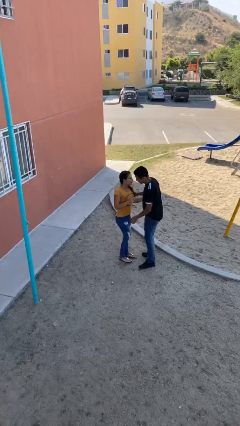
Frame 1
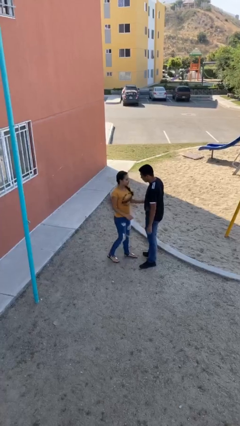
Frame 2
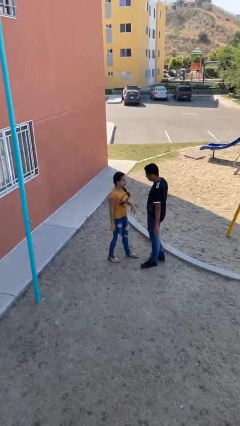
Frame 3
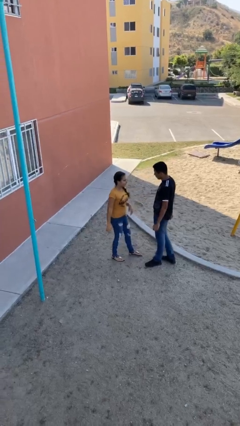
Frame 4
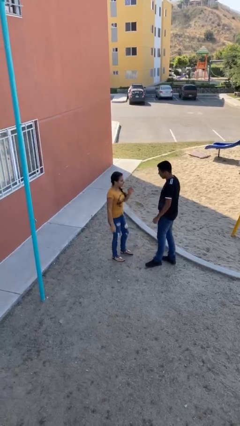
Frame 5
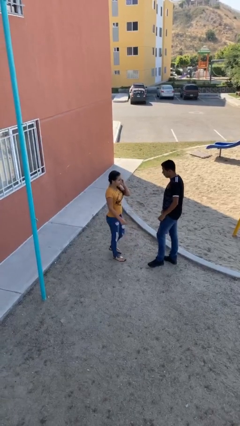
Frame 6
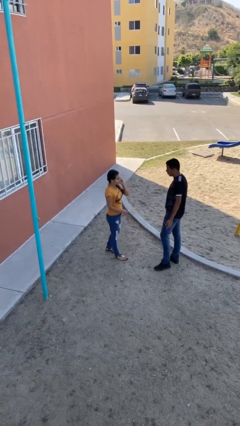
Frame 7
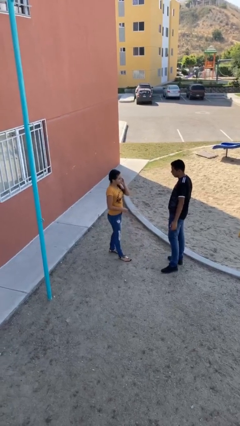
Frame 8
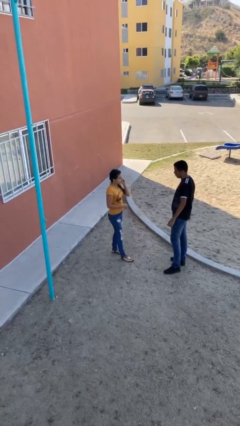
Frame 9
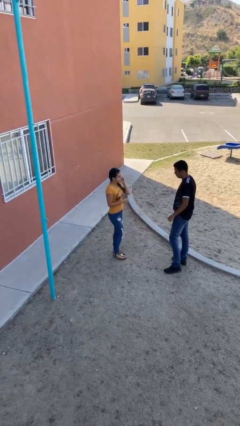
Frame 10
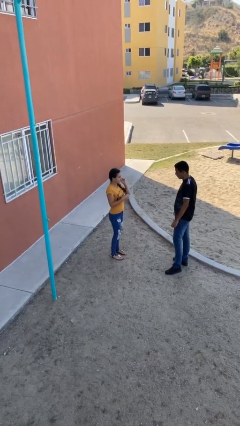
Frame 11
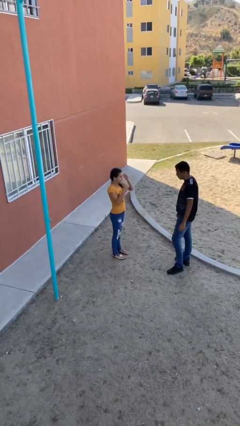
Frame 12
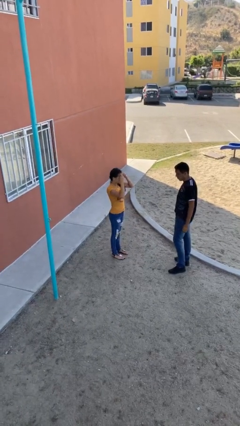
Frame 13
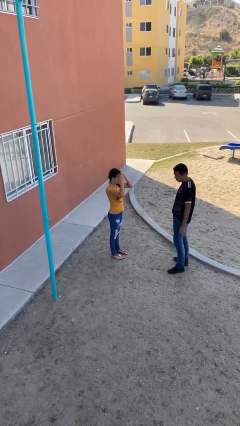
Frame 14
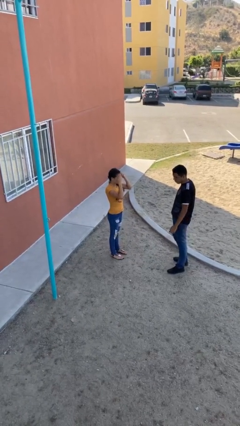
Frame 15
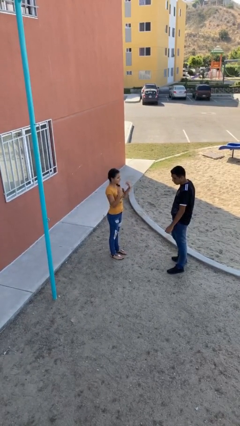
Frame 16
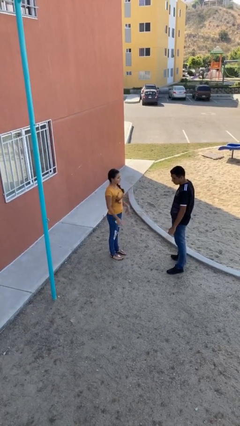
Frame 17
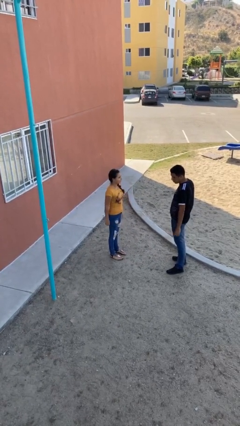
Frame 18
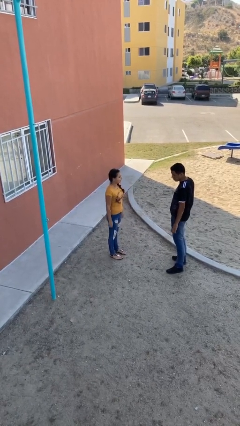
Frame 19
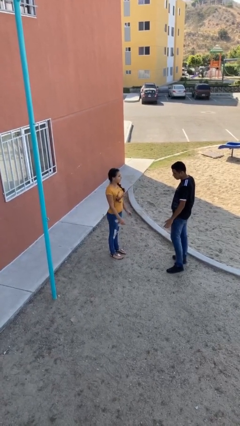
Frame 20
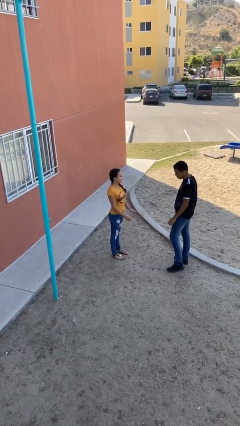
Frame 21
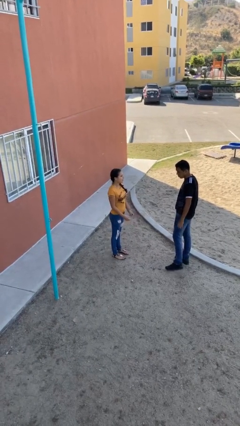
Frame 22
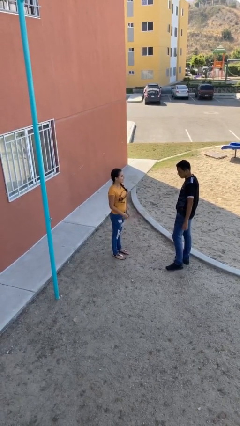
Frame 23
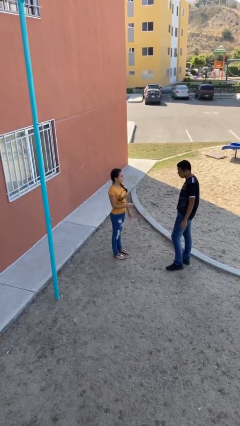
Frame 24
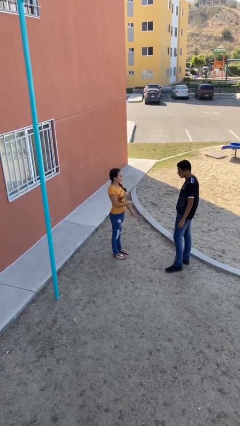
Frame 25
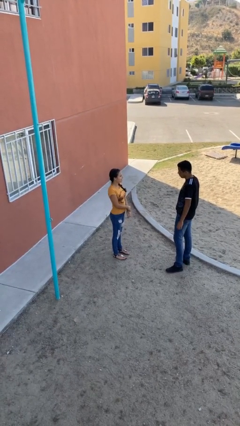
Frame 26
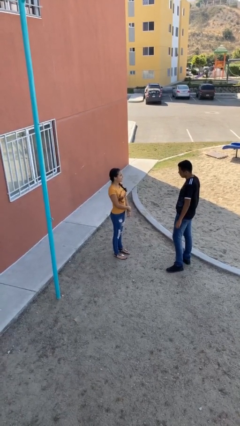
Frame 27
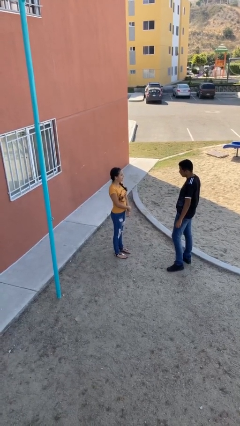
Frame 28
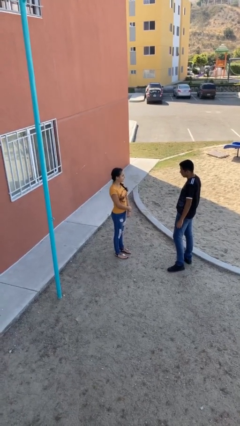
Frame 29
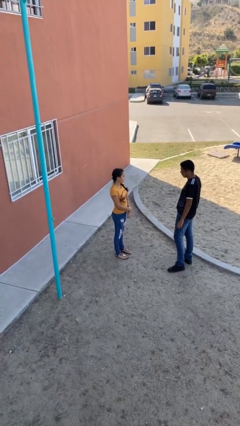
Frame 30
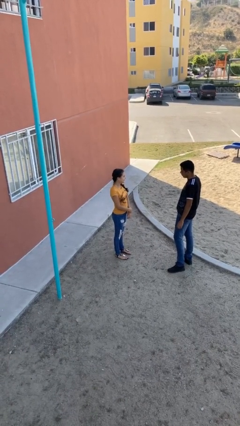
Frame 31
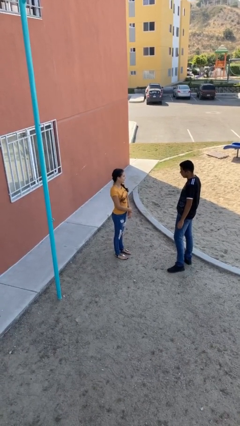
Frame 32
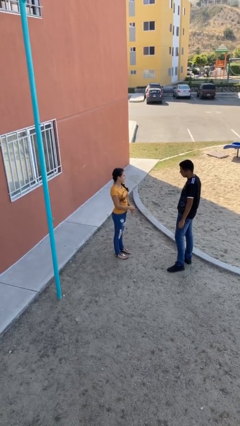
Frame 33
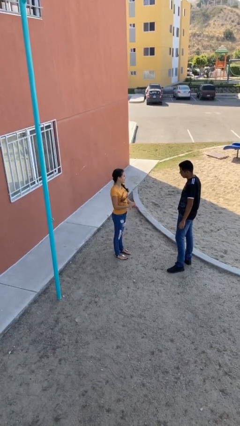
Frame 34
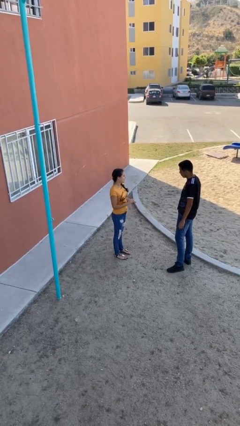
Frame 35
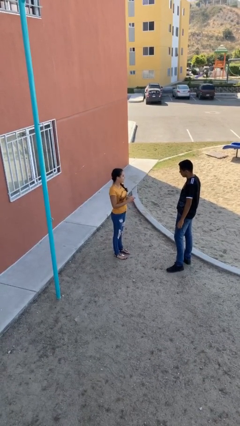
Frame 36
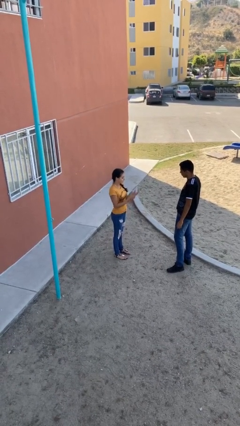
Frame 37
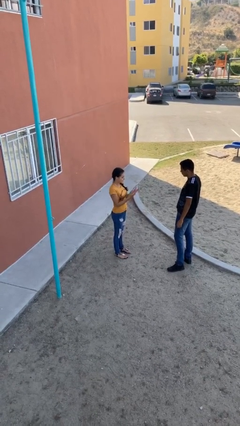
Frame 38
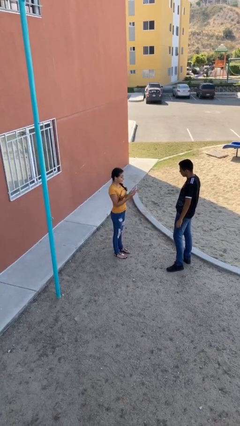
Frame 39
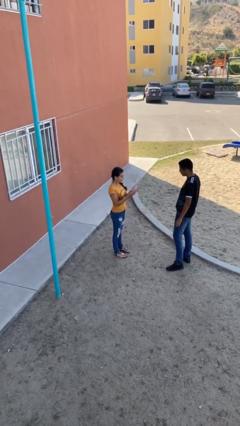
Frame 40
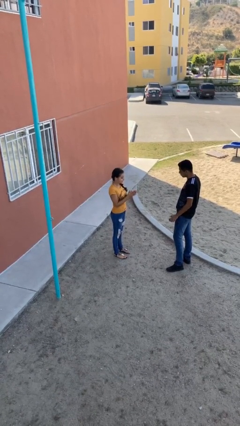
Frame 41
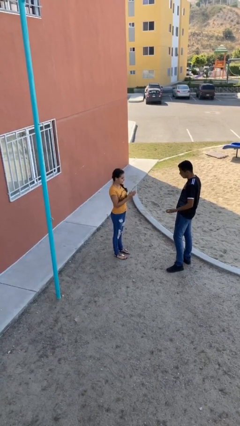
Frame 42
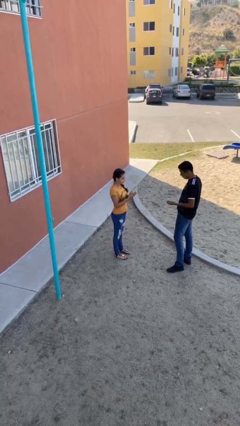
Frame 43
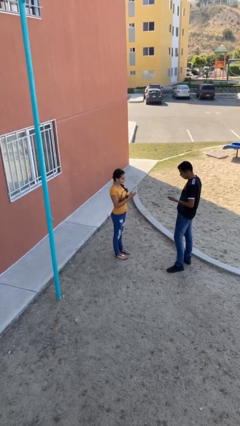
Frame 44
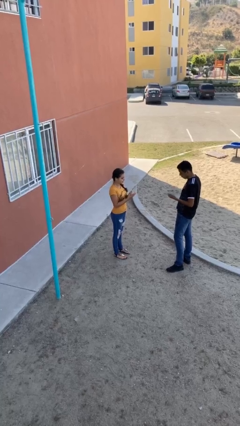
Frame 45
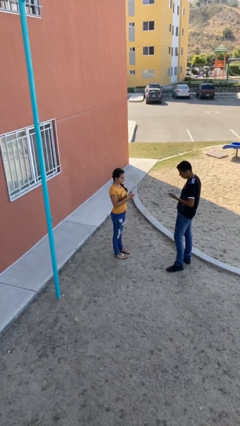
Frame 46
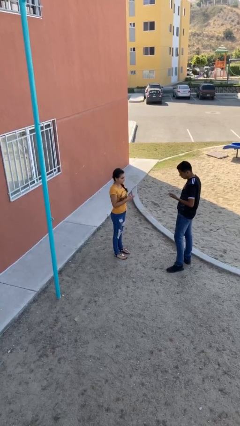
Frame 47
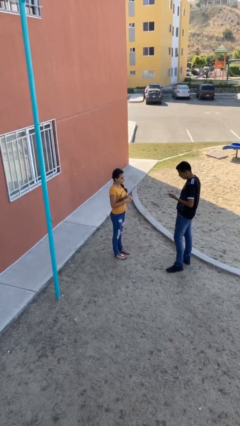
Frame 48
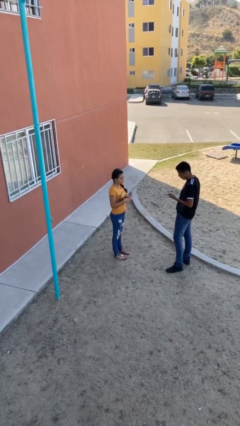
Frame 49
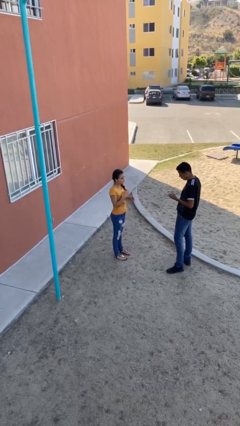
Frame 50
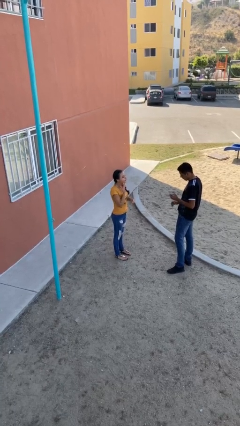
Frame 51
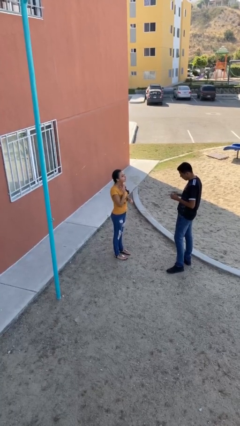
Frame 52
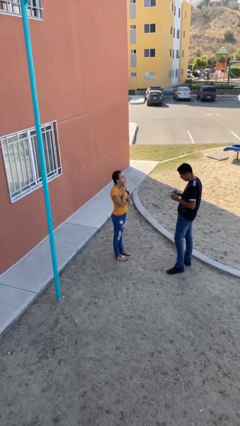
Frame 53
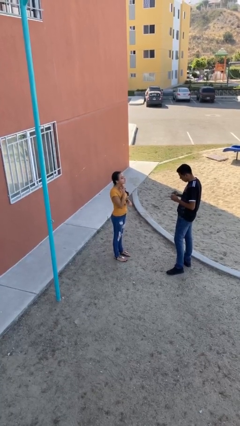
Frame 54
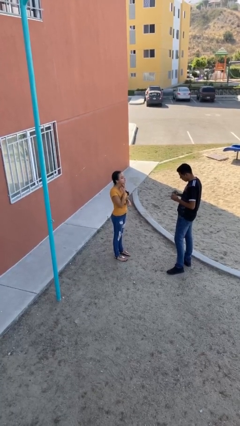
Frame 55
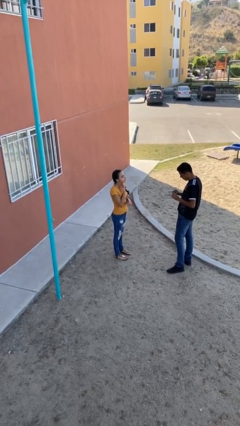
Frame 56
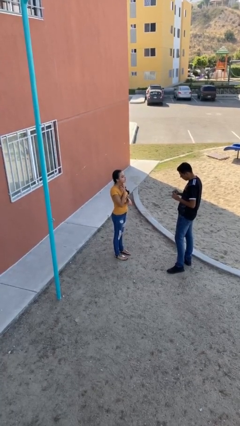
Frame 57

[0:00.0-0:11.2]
person talks to person

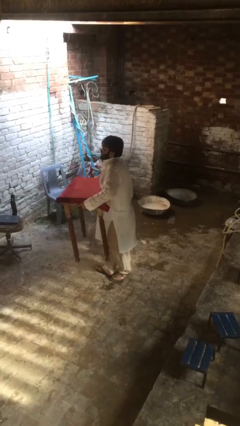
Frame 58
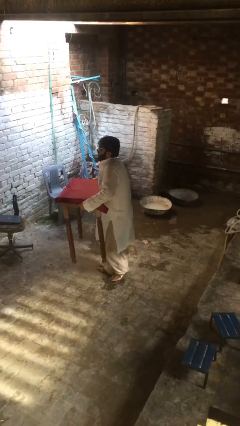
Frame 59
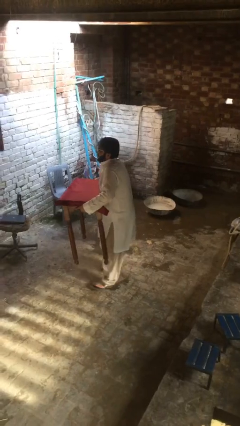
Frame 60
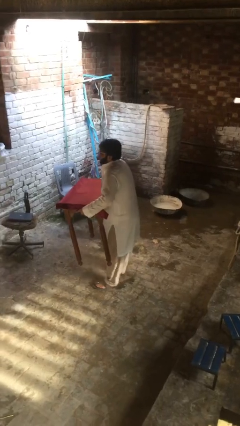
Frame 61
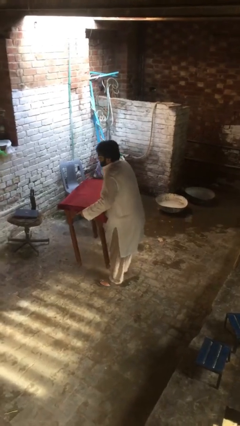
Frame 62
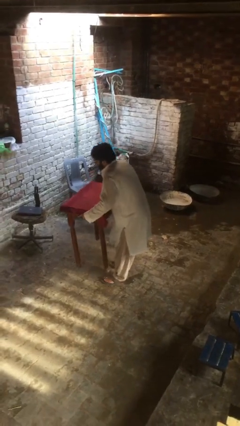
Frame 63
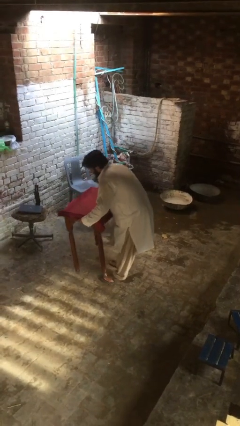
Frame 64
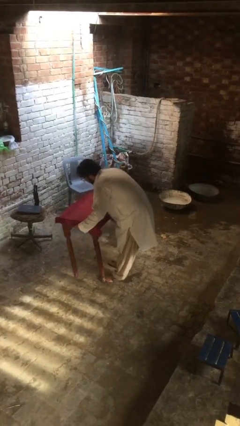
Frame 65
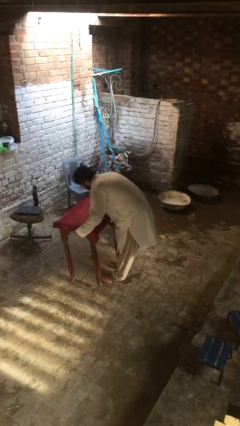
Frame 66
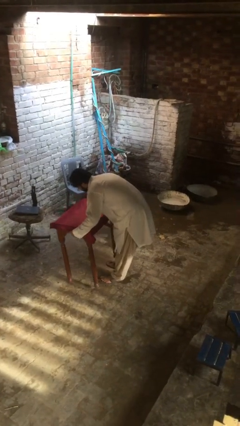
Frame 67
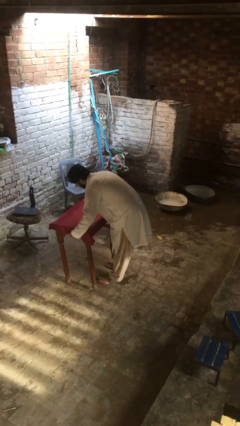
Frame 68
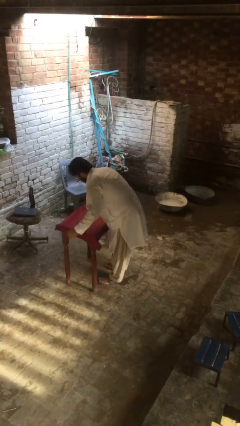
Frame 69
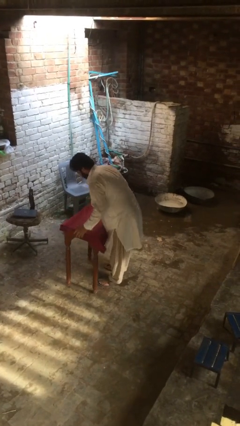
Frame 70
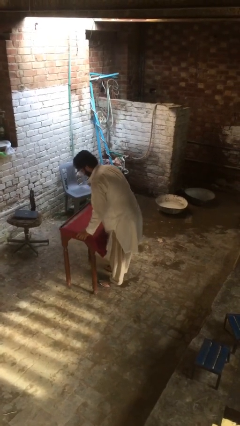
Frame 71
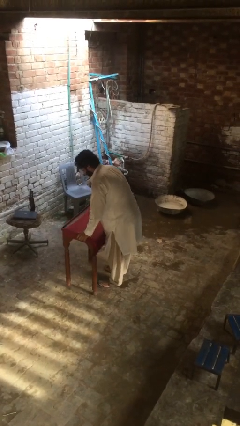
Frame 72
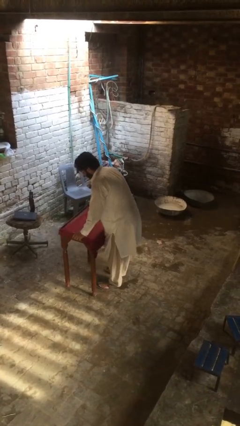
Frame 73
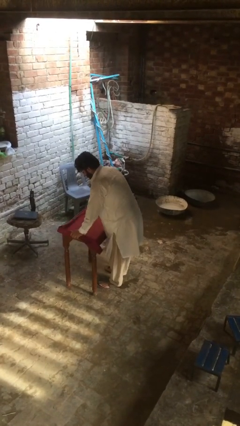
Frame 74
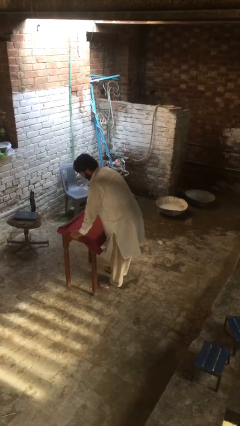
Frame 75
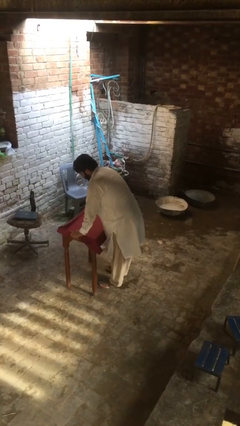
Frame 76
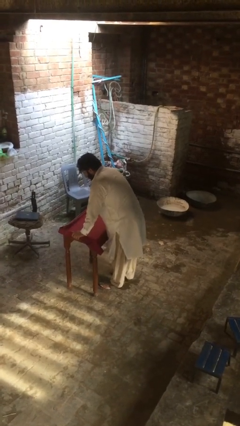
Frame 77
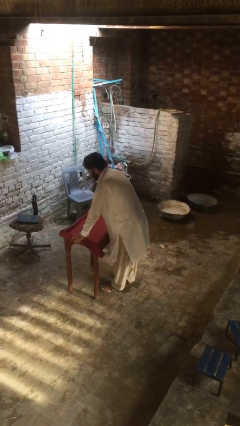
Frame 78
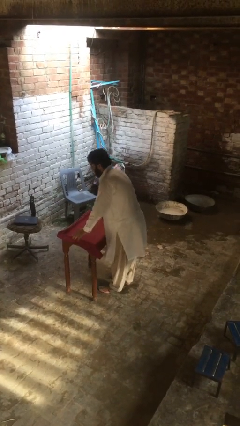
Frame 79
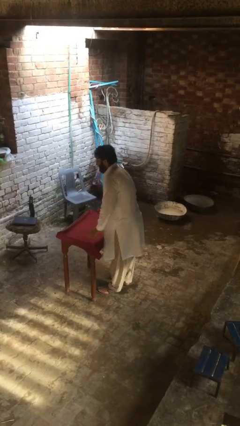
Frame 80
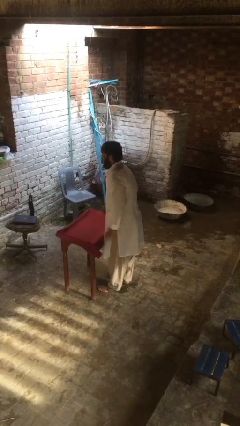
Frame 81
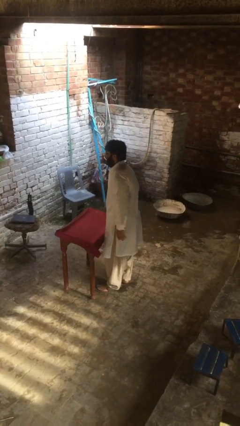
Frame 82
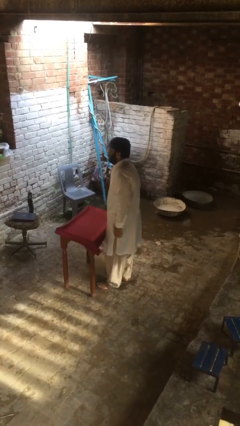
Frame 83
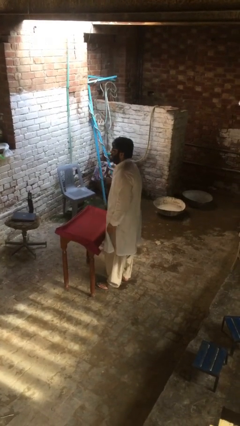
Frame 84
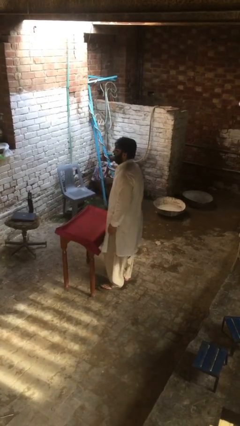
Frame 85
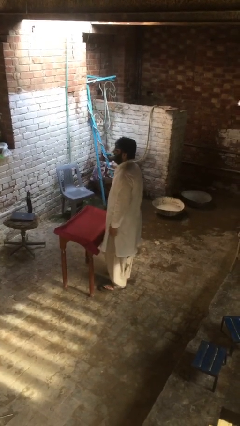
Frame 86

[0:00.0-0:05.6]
person puts down object on floor

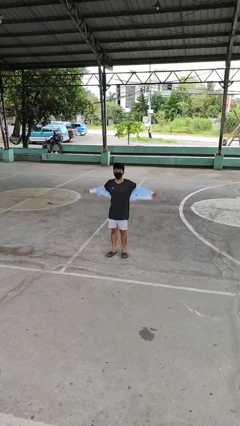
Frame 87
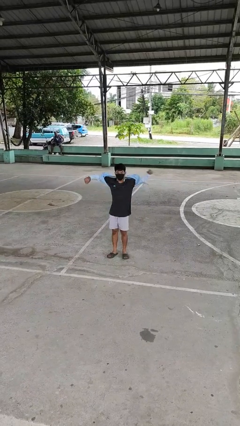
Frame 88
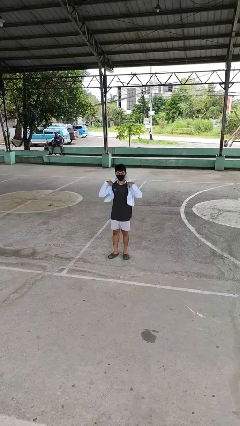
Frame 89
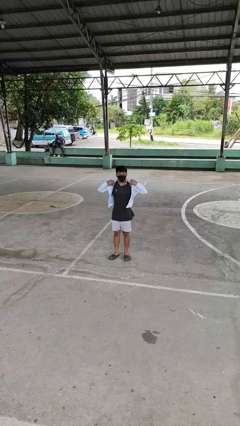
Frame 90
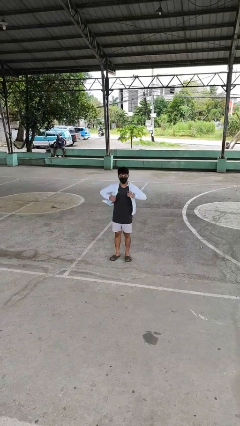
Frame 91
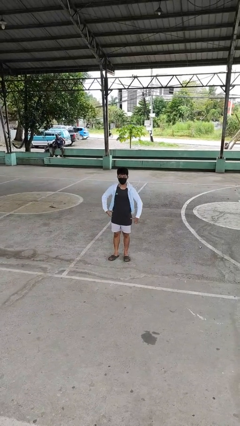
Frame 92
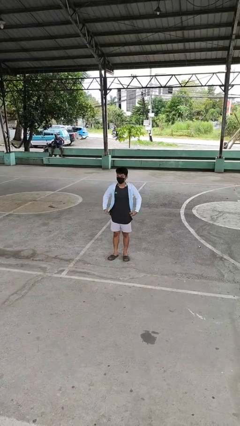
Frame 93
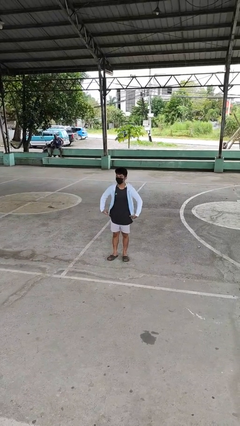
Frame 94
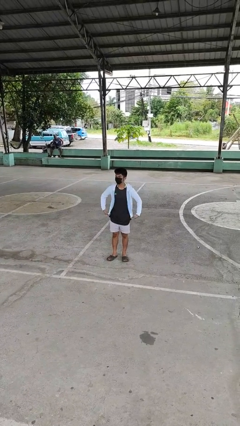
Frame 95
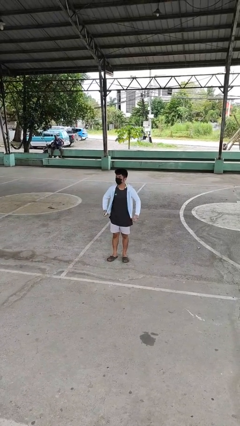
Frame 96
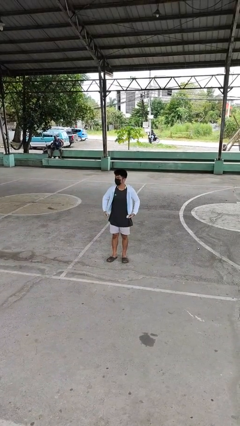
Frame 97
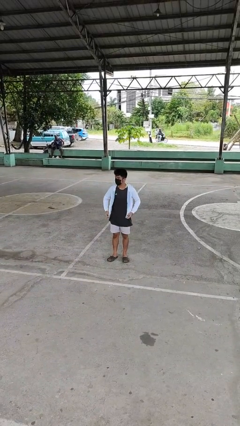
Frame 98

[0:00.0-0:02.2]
person puts on jacket
